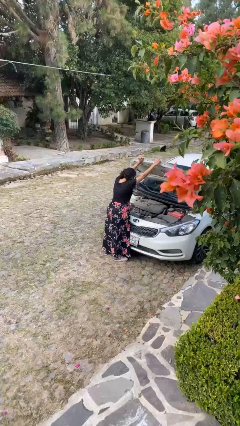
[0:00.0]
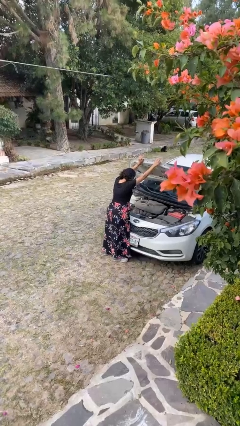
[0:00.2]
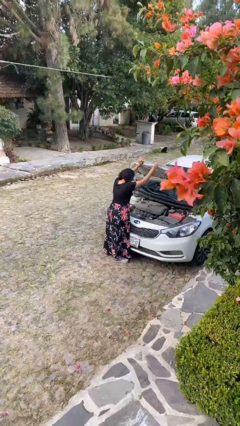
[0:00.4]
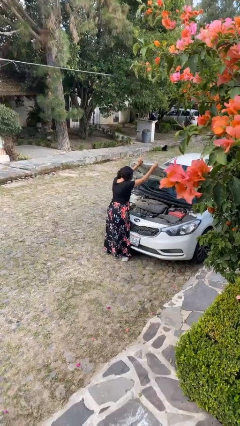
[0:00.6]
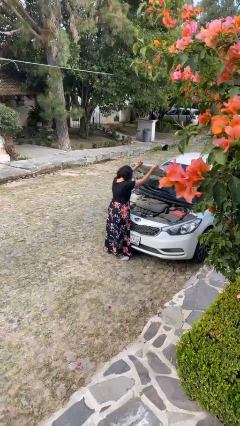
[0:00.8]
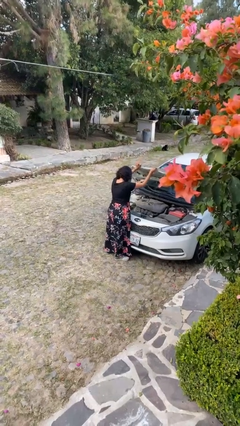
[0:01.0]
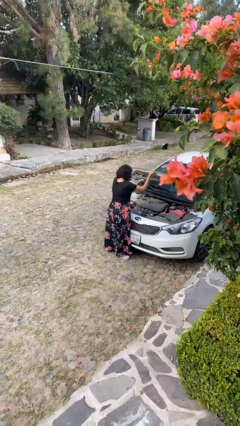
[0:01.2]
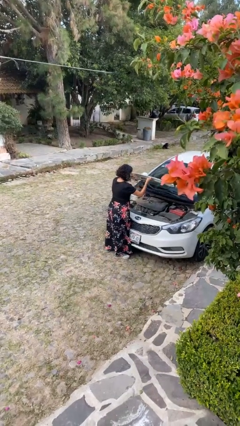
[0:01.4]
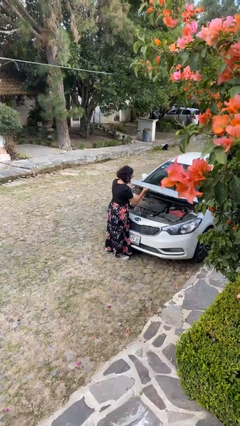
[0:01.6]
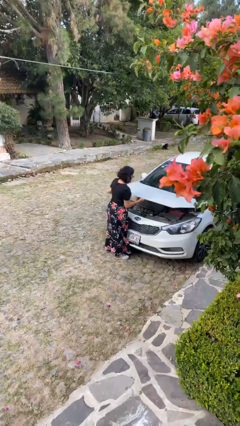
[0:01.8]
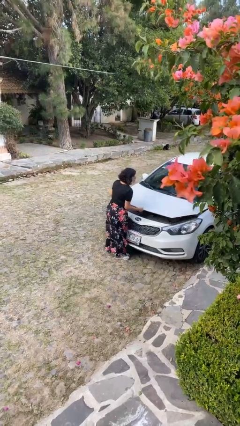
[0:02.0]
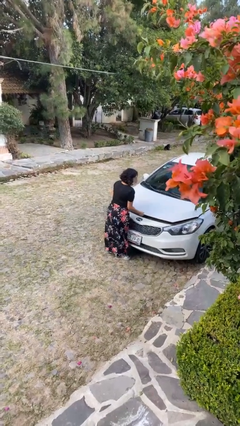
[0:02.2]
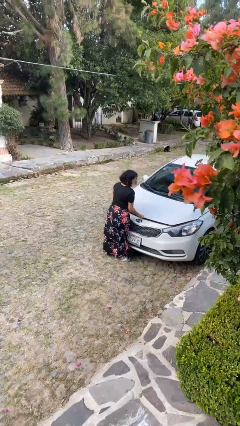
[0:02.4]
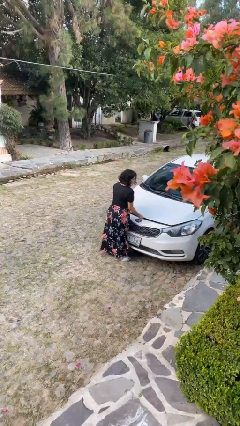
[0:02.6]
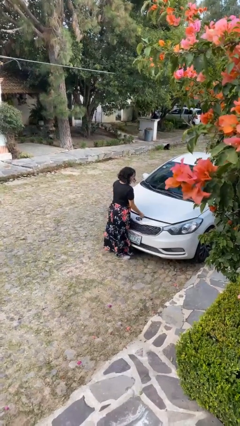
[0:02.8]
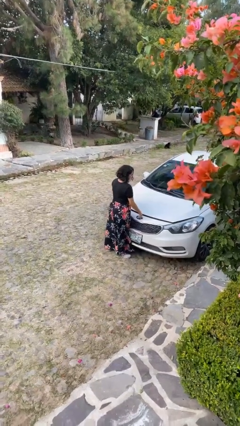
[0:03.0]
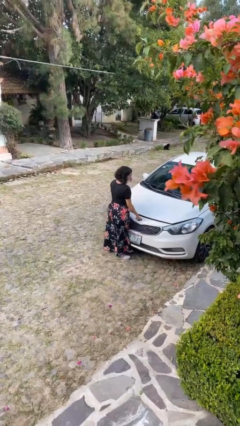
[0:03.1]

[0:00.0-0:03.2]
person closes car hood

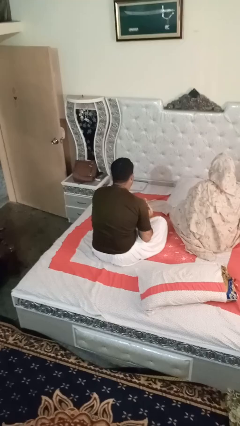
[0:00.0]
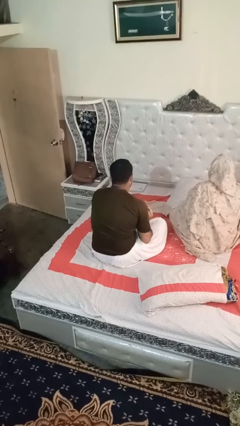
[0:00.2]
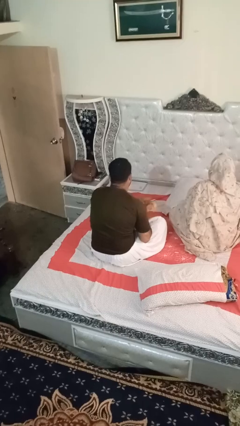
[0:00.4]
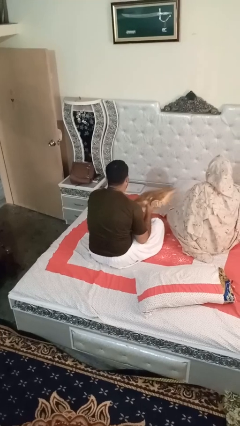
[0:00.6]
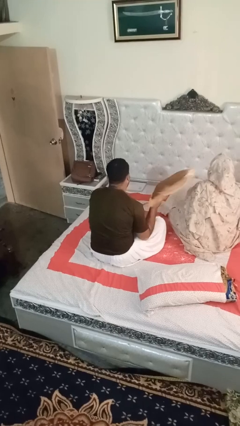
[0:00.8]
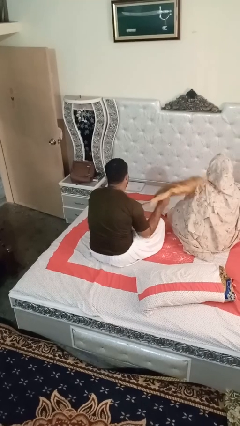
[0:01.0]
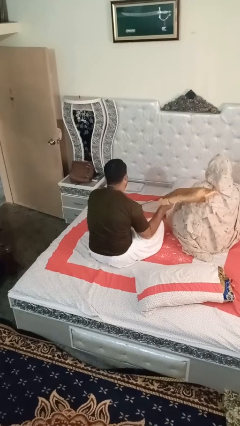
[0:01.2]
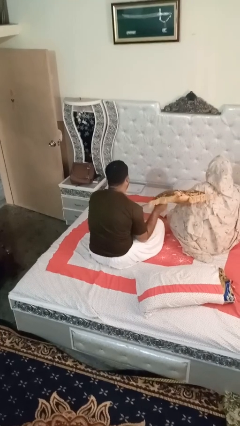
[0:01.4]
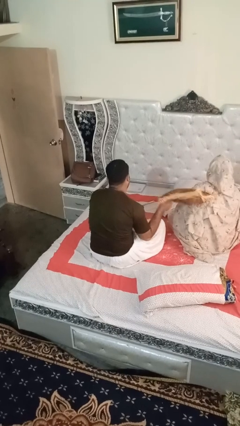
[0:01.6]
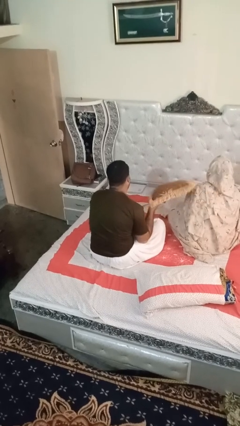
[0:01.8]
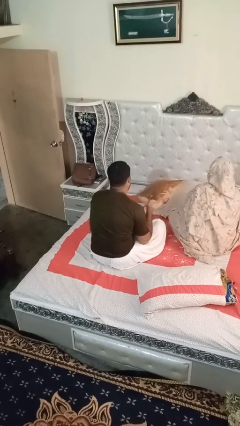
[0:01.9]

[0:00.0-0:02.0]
person hits person with pillow

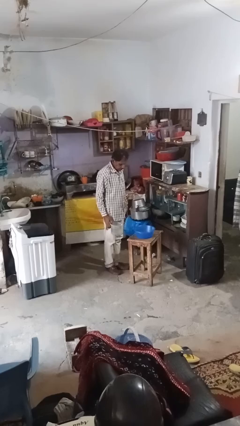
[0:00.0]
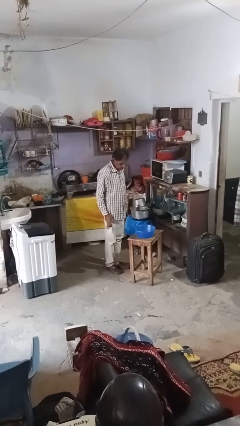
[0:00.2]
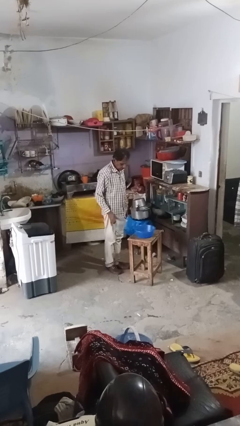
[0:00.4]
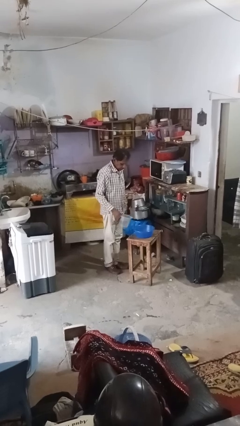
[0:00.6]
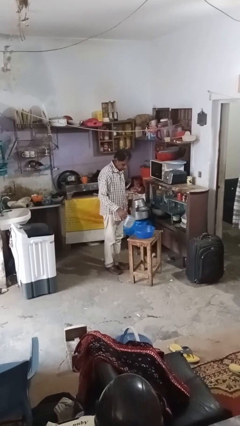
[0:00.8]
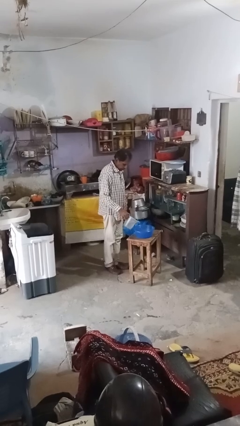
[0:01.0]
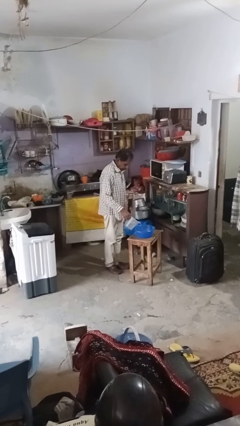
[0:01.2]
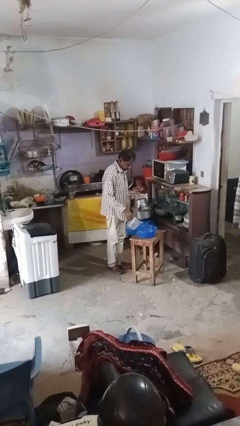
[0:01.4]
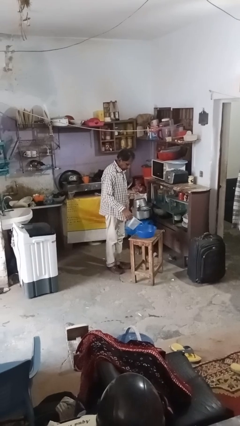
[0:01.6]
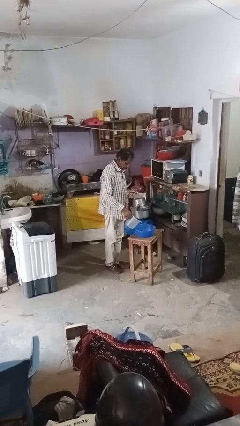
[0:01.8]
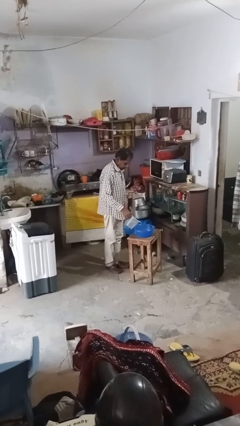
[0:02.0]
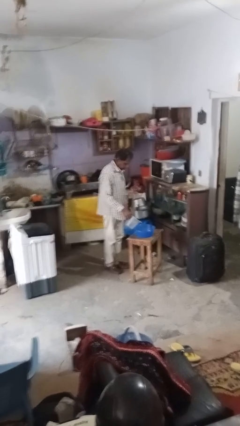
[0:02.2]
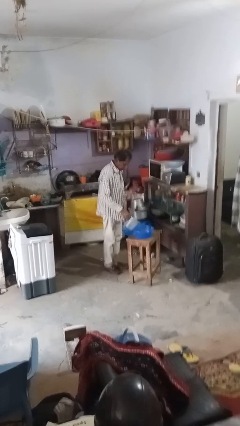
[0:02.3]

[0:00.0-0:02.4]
person pours into bowl

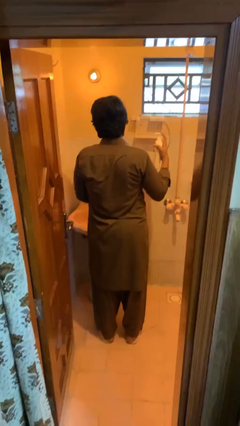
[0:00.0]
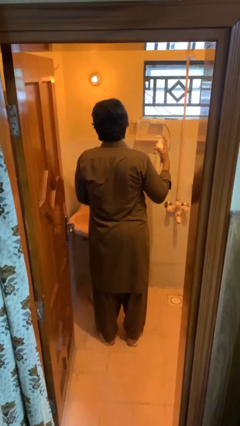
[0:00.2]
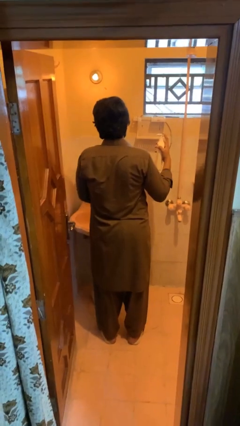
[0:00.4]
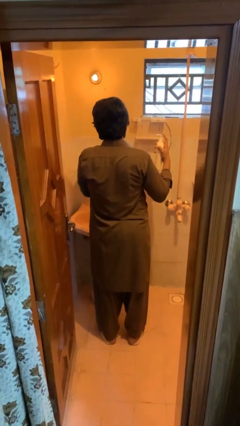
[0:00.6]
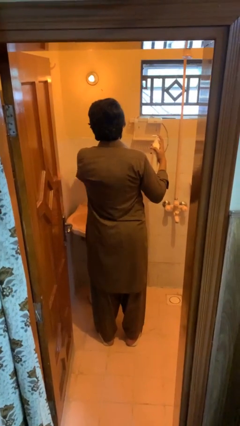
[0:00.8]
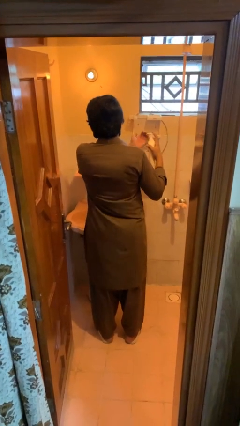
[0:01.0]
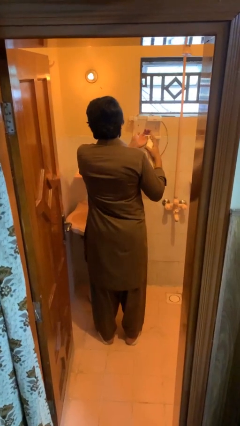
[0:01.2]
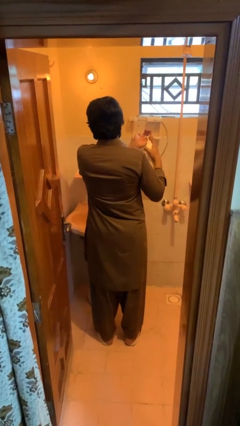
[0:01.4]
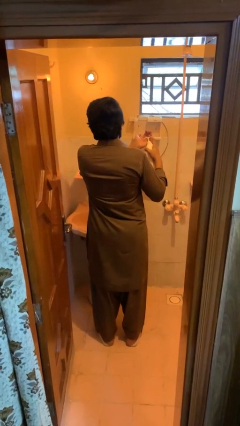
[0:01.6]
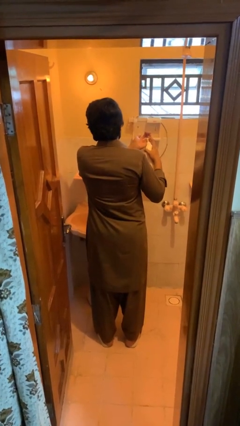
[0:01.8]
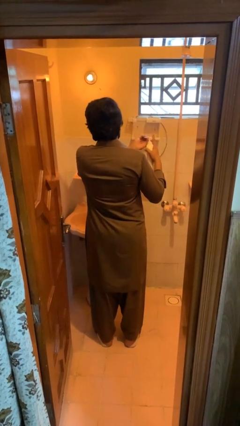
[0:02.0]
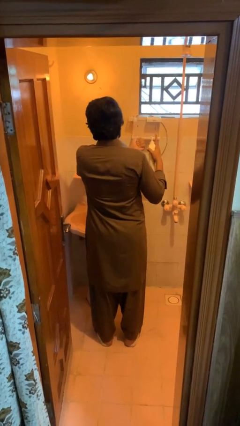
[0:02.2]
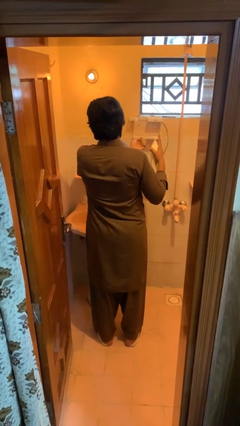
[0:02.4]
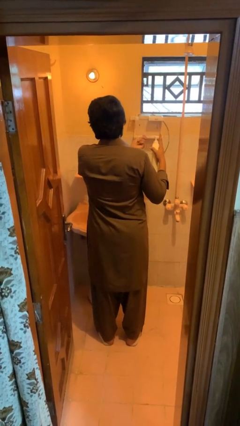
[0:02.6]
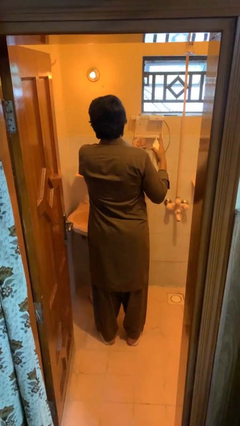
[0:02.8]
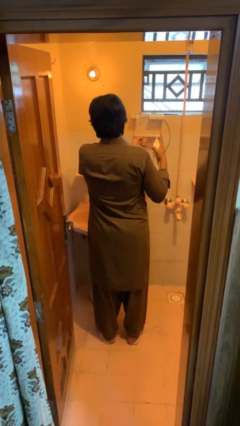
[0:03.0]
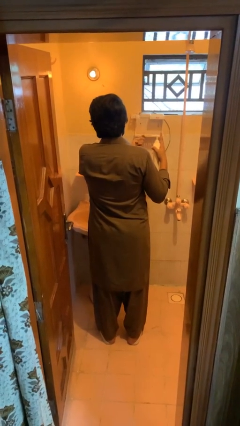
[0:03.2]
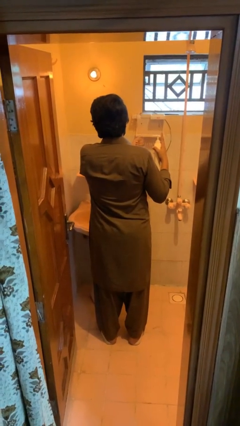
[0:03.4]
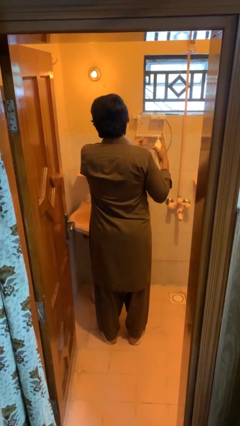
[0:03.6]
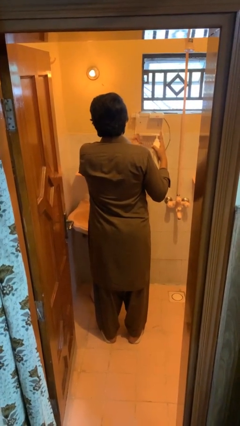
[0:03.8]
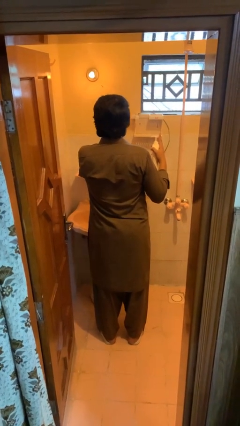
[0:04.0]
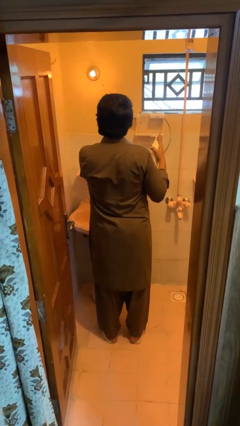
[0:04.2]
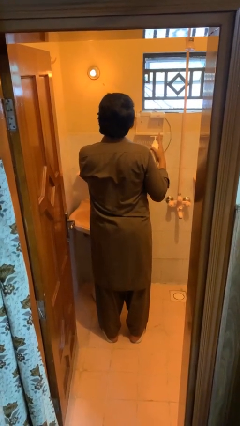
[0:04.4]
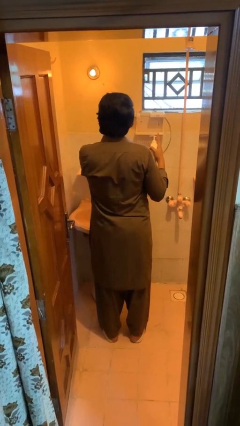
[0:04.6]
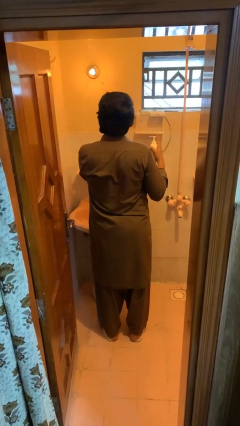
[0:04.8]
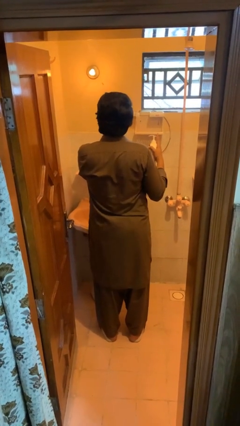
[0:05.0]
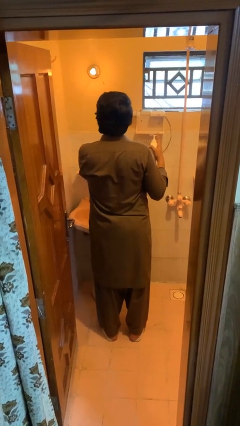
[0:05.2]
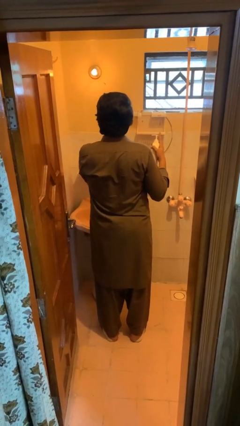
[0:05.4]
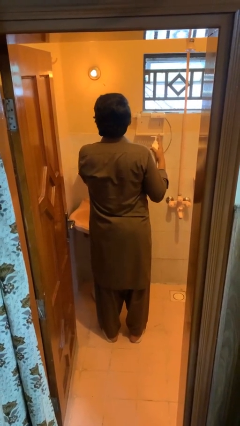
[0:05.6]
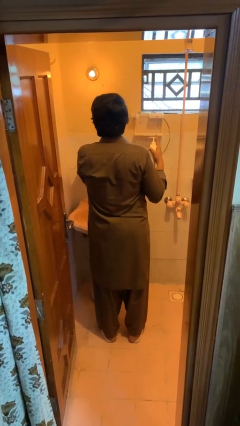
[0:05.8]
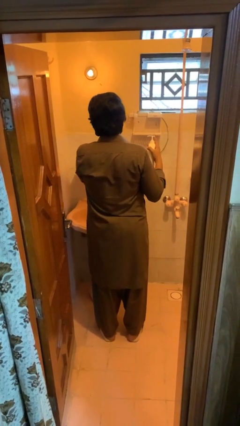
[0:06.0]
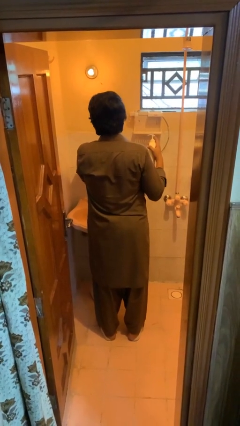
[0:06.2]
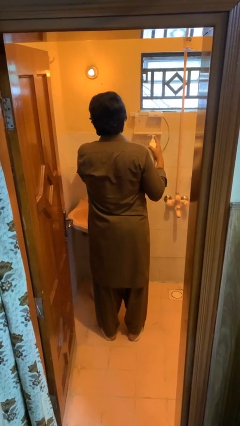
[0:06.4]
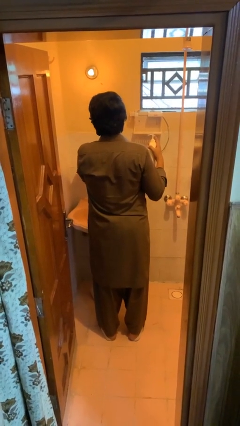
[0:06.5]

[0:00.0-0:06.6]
person applies facial moisturizer

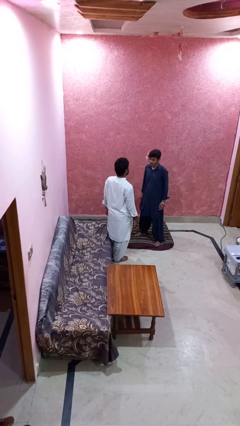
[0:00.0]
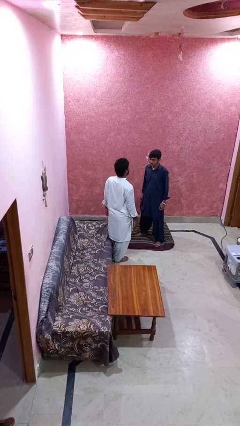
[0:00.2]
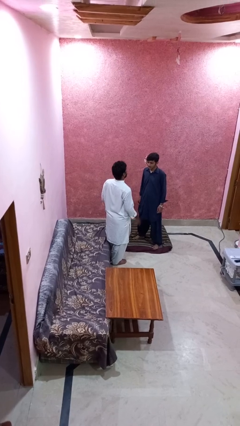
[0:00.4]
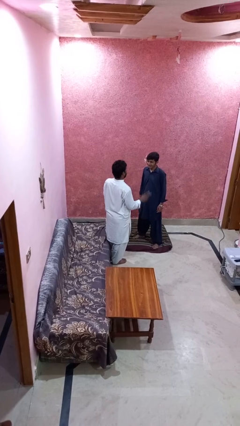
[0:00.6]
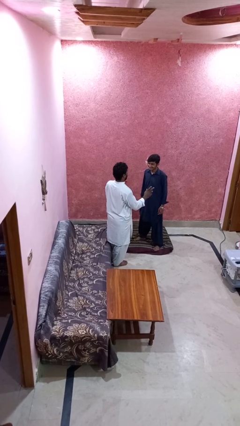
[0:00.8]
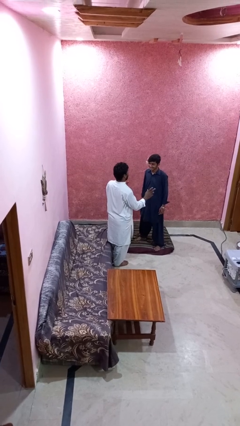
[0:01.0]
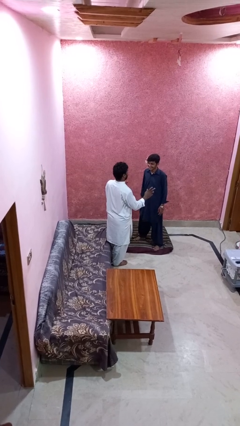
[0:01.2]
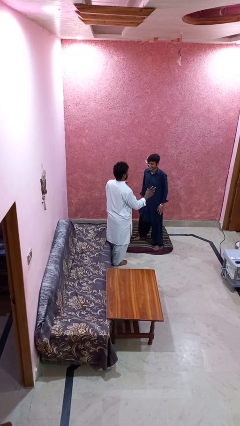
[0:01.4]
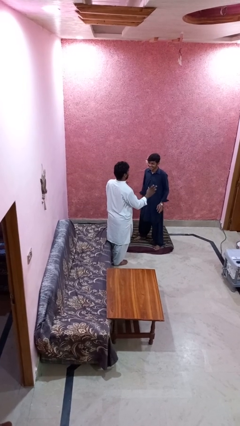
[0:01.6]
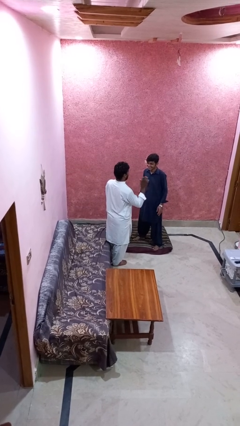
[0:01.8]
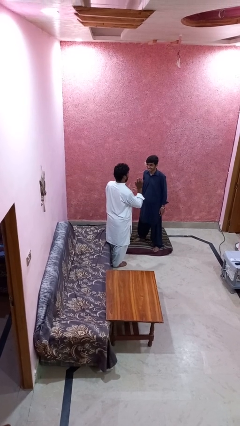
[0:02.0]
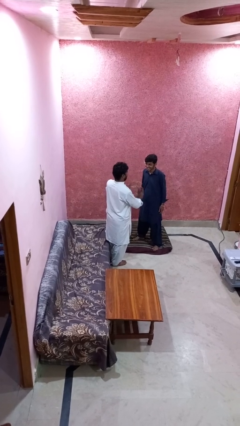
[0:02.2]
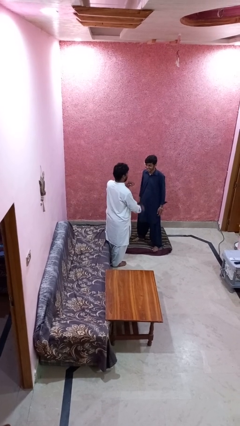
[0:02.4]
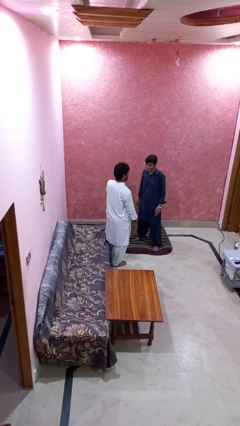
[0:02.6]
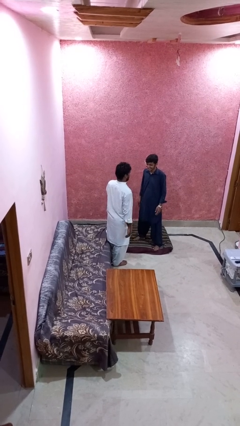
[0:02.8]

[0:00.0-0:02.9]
person laughs with person

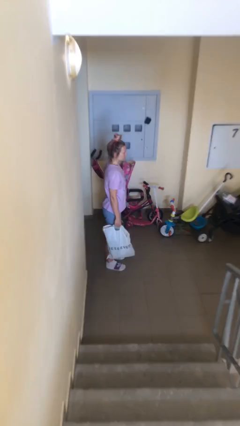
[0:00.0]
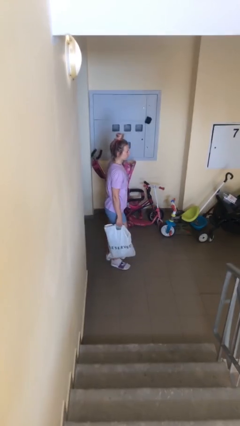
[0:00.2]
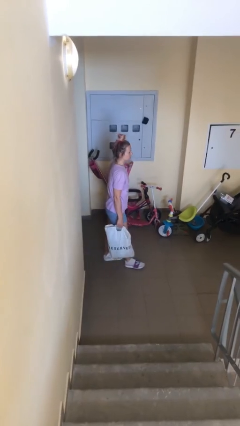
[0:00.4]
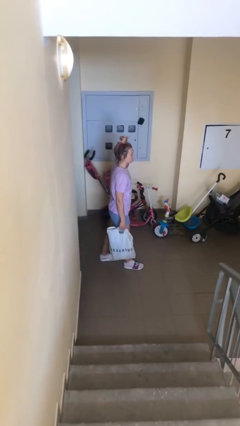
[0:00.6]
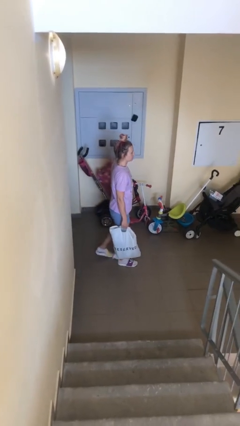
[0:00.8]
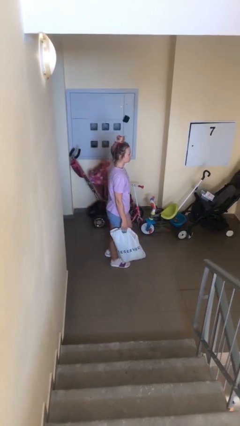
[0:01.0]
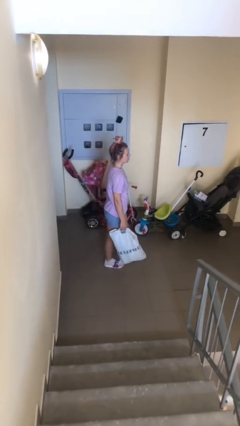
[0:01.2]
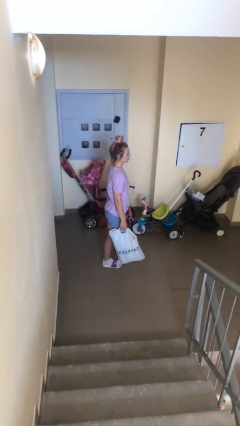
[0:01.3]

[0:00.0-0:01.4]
person carries groceries
